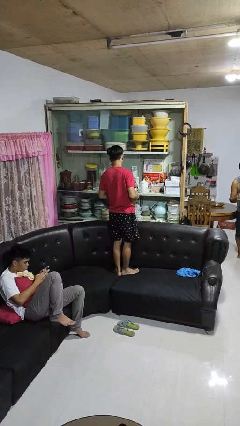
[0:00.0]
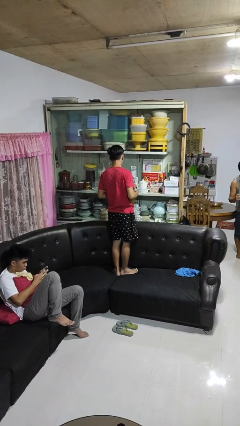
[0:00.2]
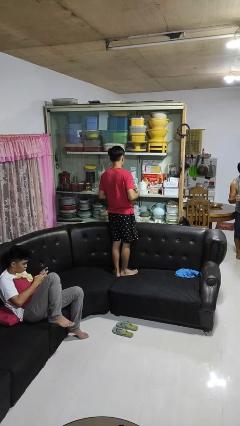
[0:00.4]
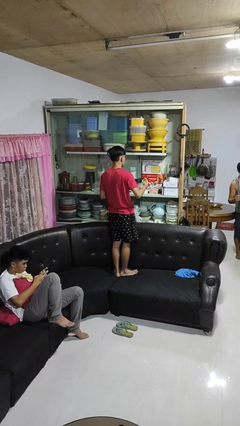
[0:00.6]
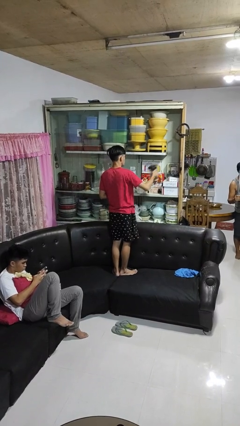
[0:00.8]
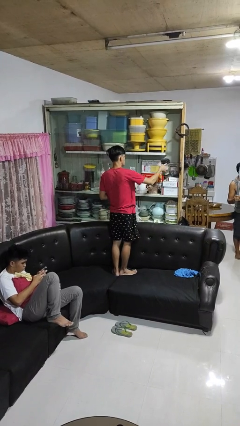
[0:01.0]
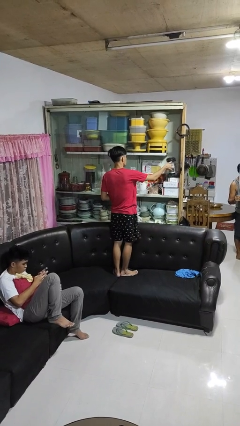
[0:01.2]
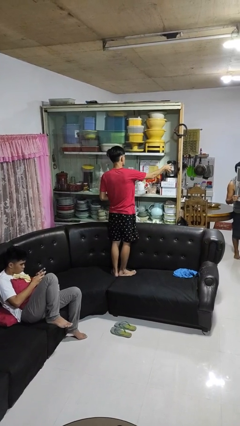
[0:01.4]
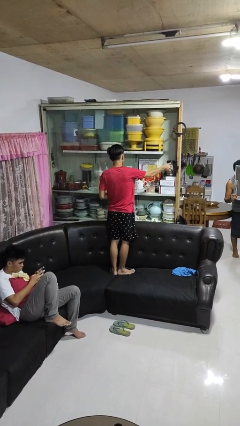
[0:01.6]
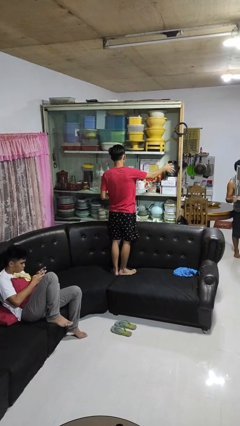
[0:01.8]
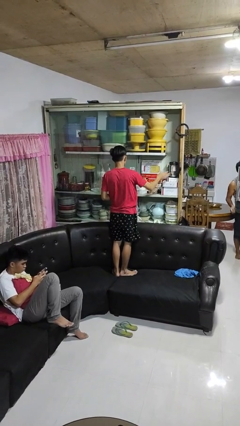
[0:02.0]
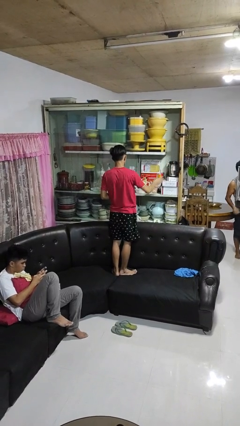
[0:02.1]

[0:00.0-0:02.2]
person puts down object into cabinet

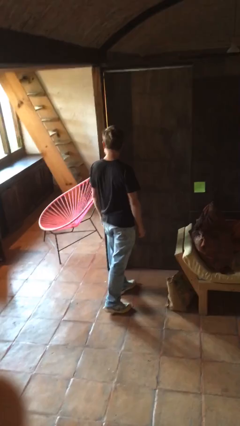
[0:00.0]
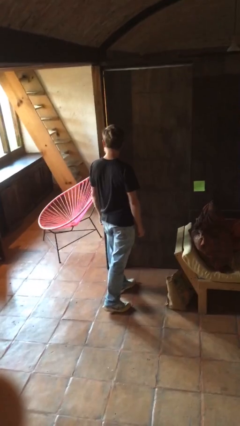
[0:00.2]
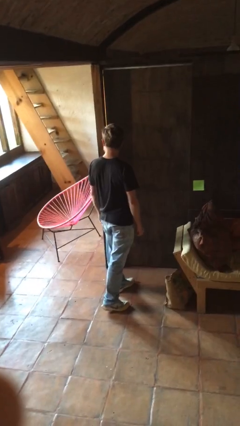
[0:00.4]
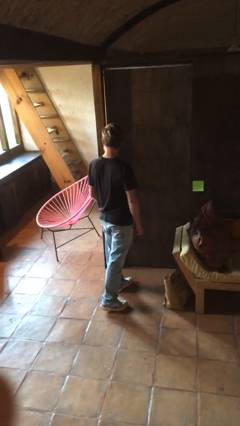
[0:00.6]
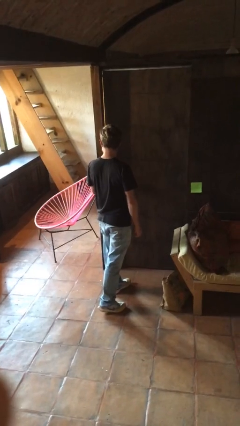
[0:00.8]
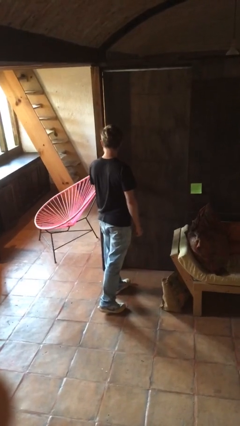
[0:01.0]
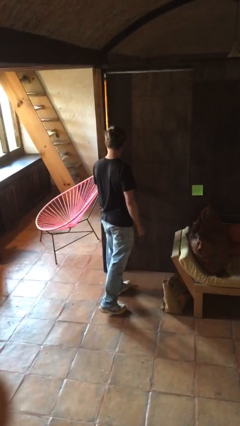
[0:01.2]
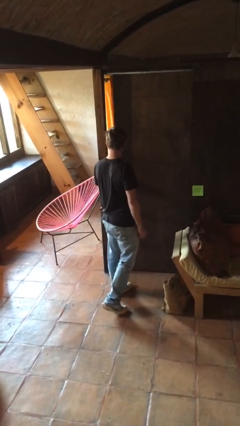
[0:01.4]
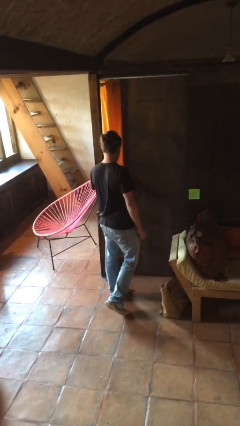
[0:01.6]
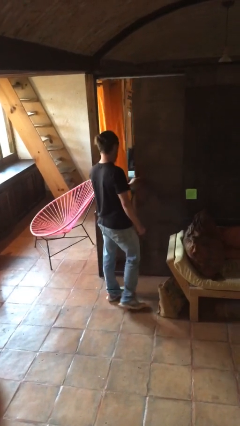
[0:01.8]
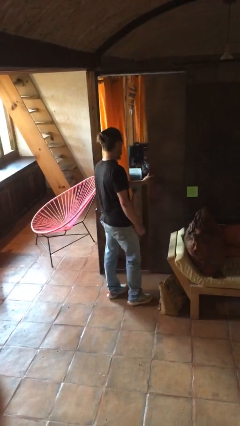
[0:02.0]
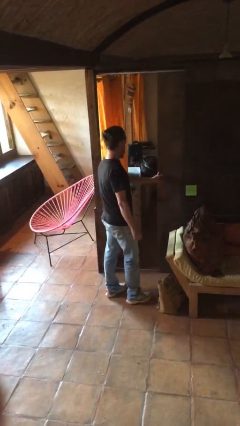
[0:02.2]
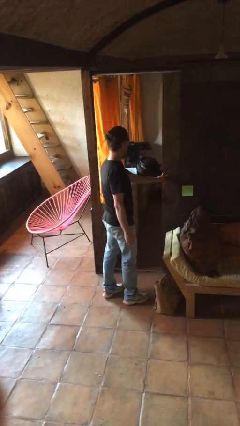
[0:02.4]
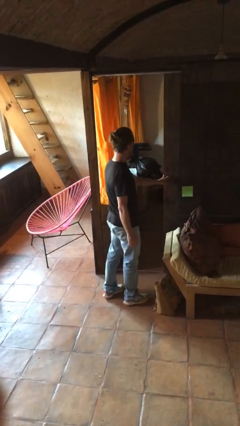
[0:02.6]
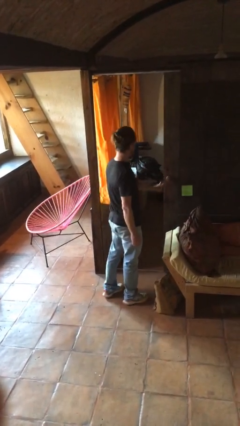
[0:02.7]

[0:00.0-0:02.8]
person opens sliding door

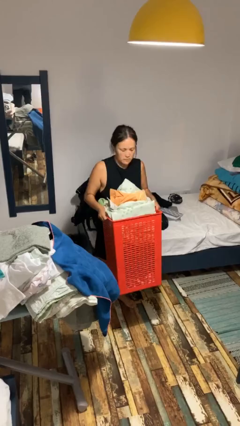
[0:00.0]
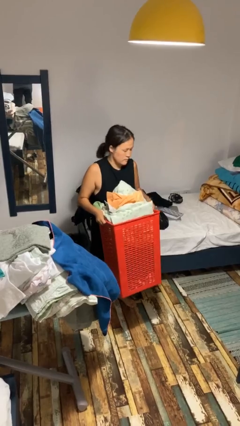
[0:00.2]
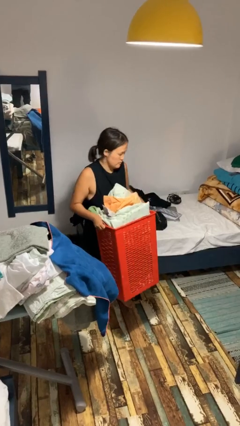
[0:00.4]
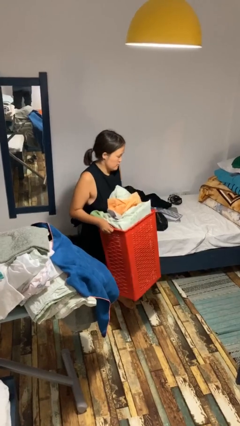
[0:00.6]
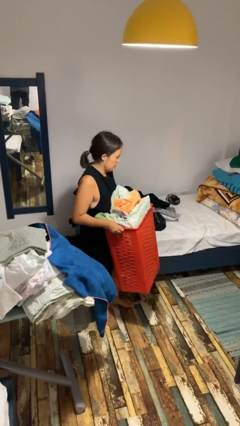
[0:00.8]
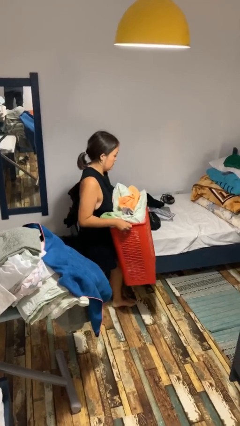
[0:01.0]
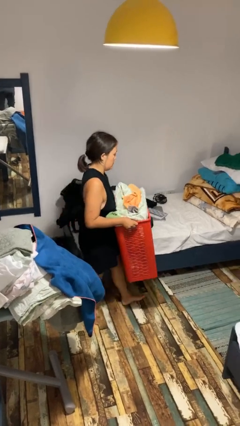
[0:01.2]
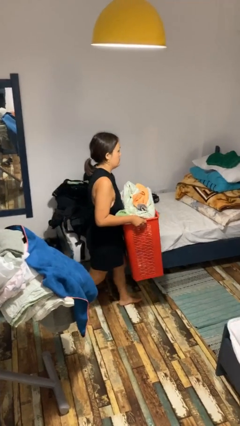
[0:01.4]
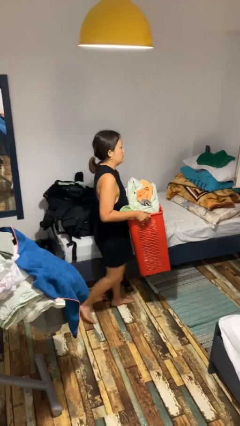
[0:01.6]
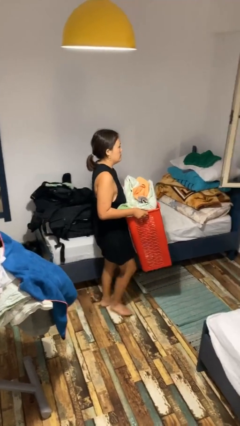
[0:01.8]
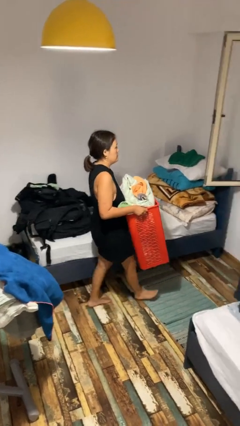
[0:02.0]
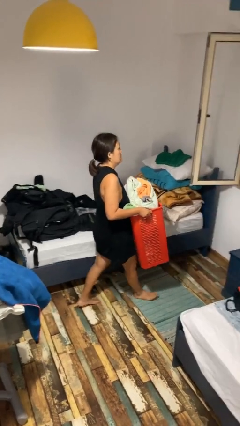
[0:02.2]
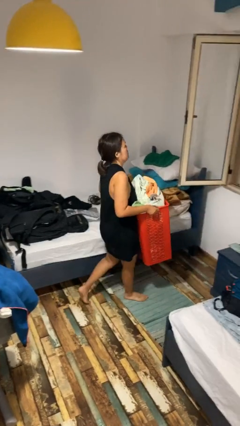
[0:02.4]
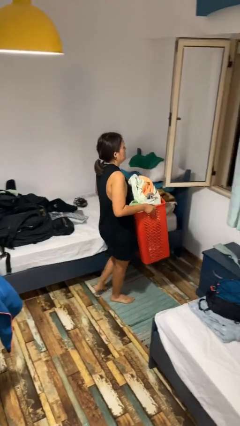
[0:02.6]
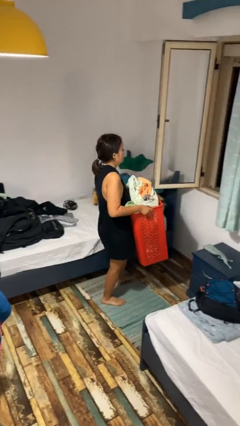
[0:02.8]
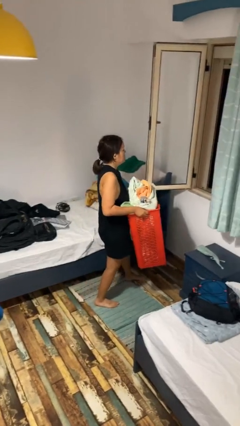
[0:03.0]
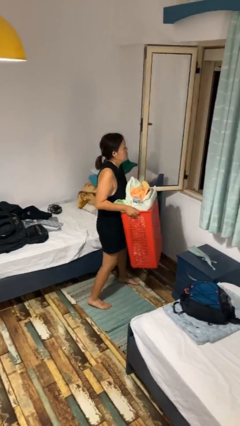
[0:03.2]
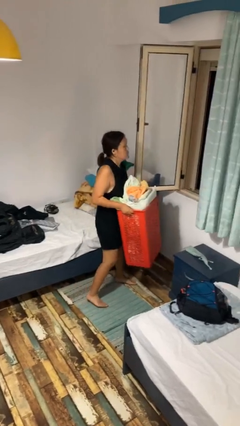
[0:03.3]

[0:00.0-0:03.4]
person carries laundry basket

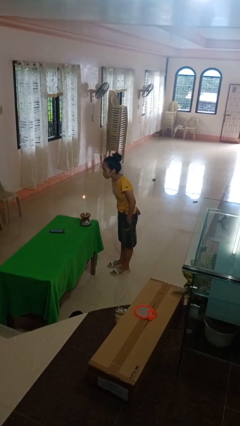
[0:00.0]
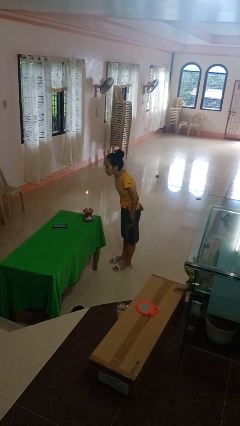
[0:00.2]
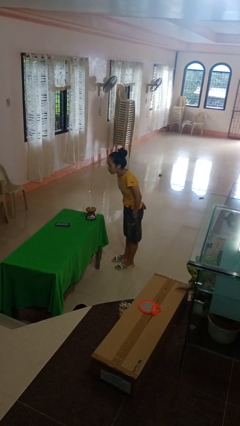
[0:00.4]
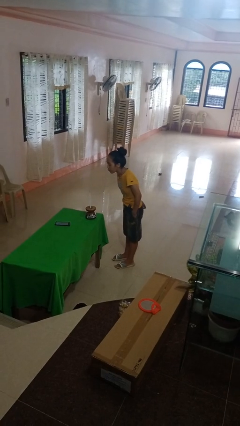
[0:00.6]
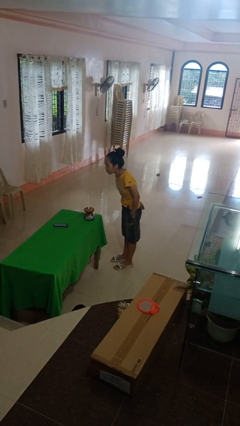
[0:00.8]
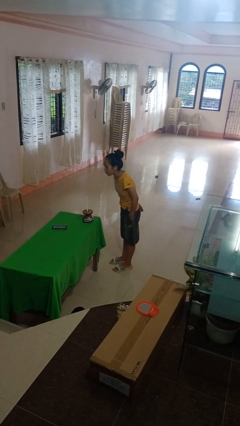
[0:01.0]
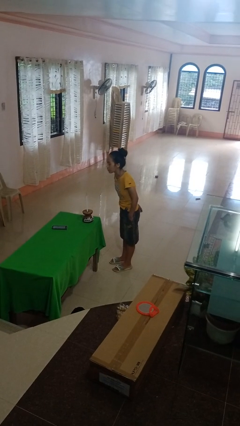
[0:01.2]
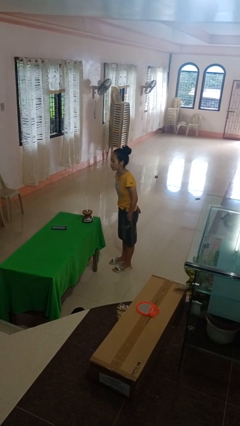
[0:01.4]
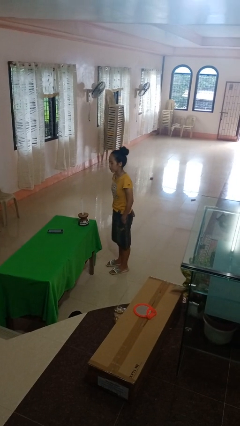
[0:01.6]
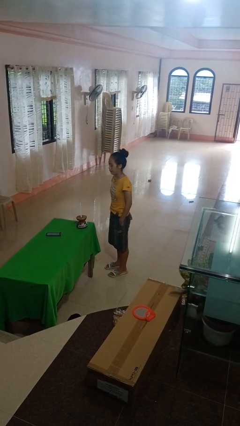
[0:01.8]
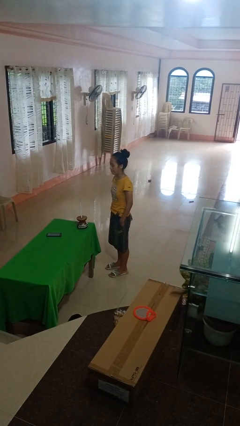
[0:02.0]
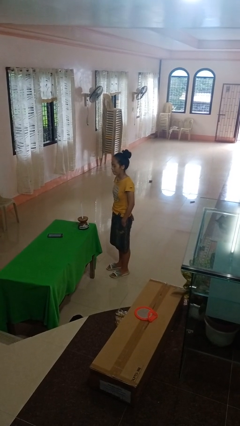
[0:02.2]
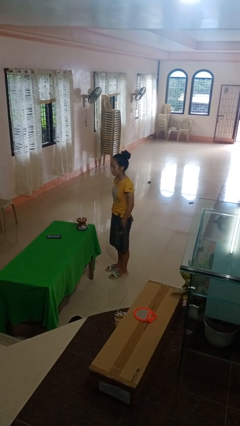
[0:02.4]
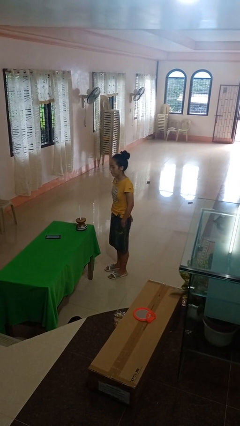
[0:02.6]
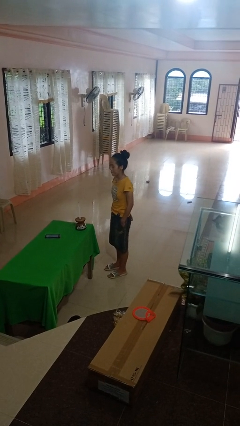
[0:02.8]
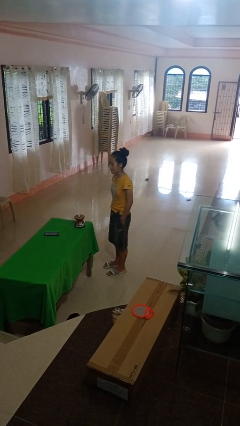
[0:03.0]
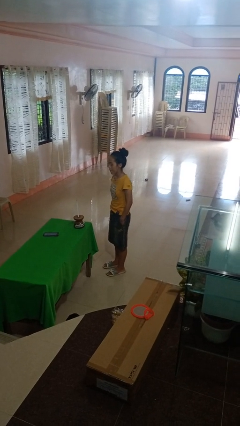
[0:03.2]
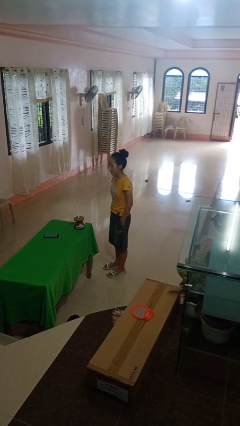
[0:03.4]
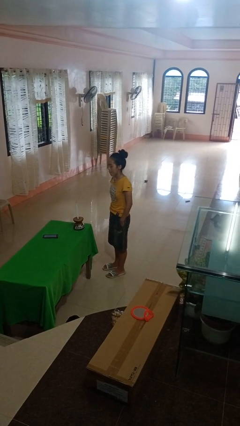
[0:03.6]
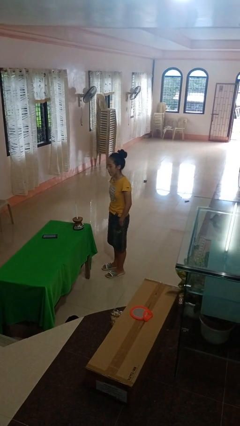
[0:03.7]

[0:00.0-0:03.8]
person extinguishes candle

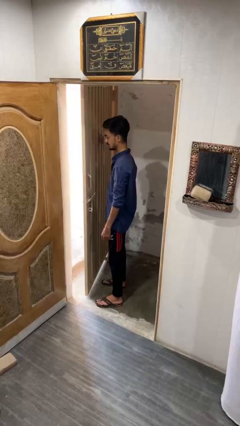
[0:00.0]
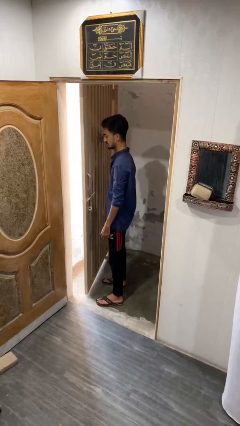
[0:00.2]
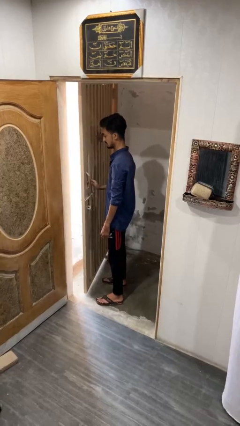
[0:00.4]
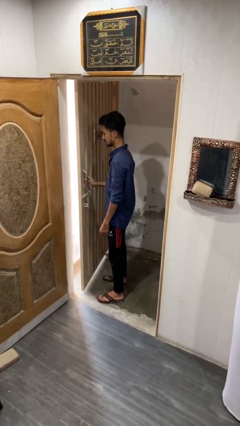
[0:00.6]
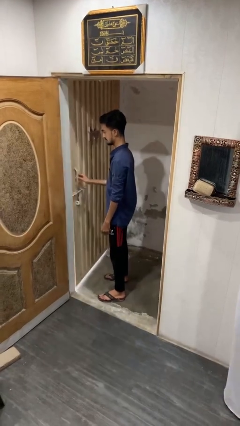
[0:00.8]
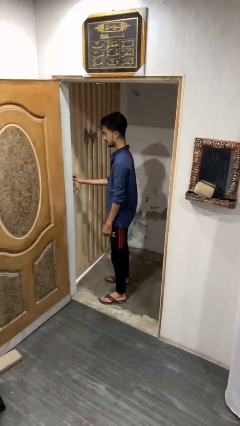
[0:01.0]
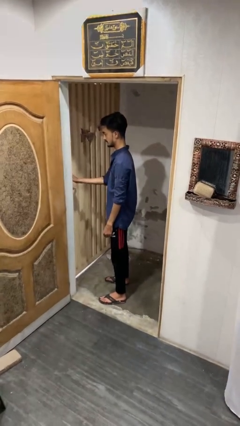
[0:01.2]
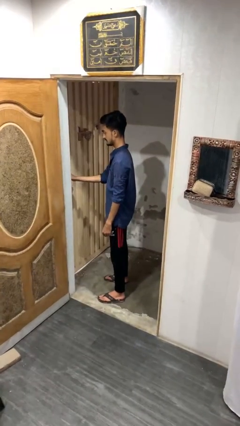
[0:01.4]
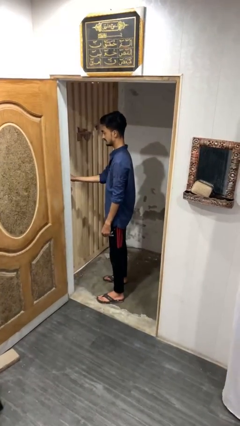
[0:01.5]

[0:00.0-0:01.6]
person closes gate

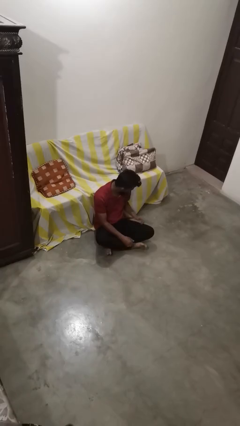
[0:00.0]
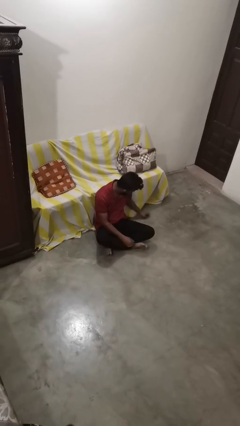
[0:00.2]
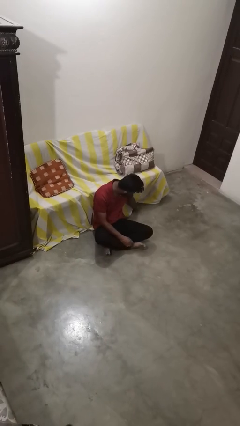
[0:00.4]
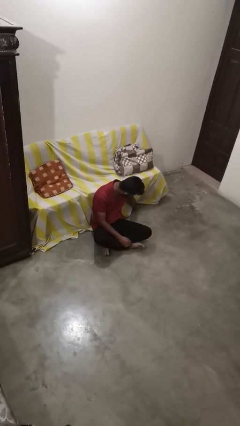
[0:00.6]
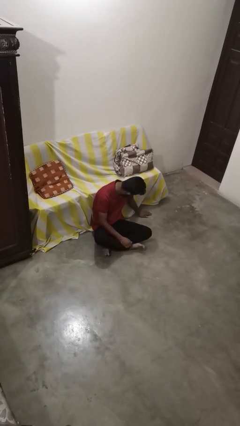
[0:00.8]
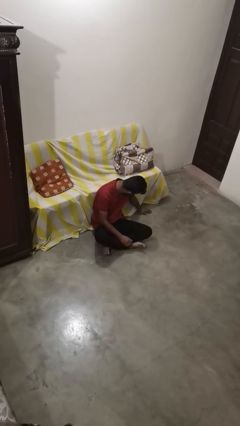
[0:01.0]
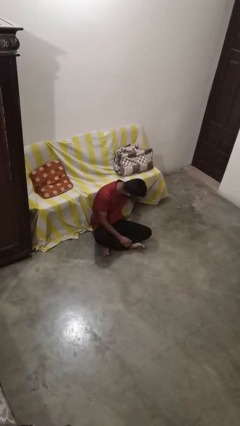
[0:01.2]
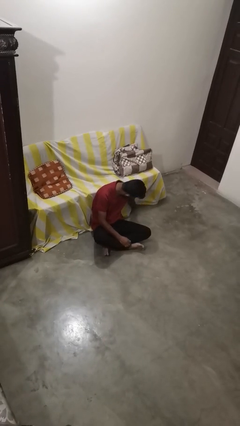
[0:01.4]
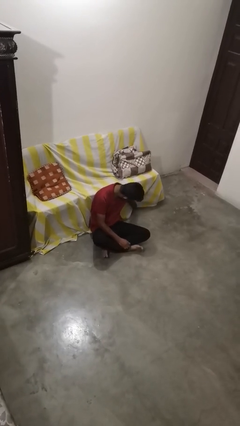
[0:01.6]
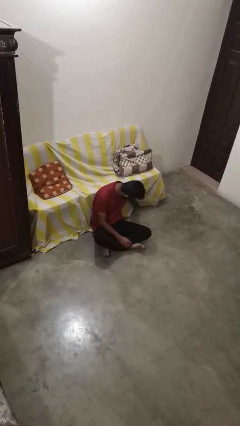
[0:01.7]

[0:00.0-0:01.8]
person searches under couch

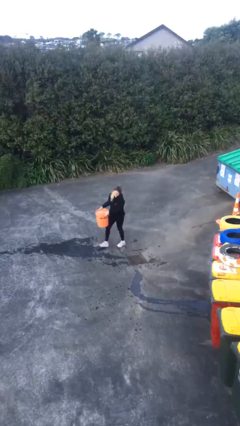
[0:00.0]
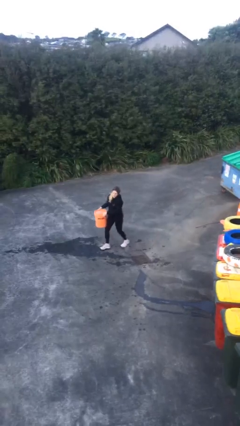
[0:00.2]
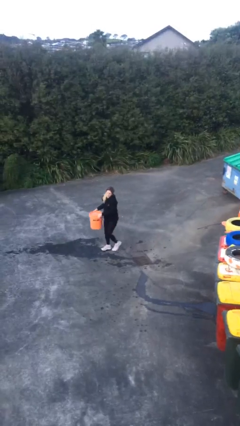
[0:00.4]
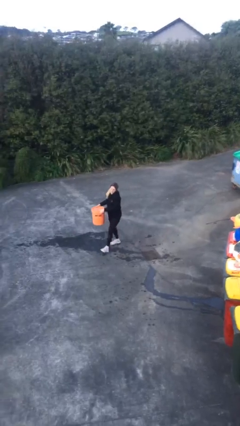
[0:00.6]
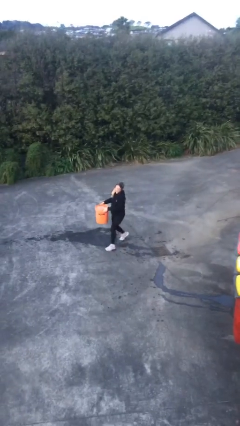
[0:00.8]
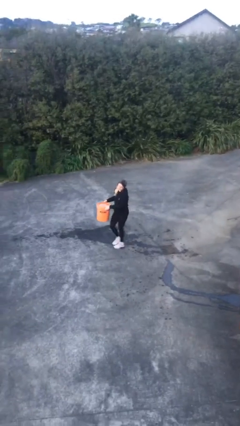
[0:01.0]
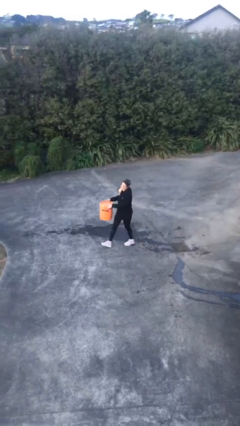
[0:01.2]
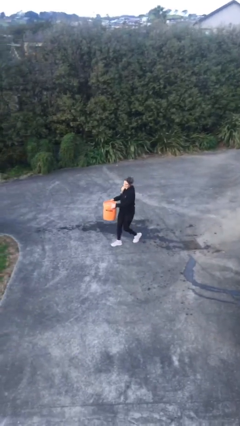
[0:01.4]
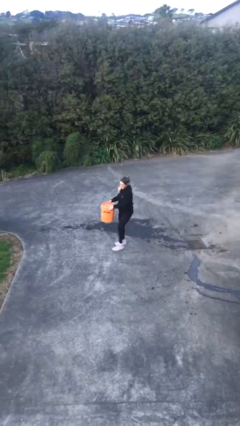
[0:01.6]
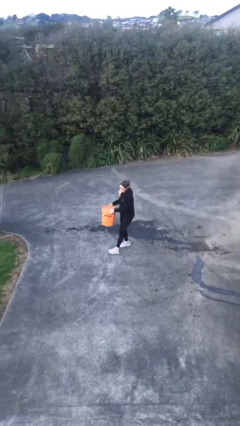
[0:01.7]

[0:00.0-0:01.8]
person carries heavy object
